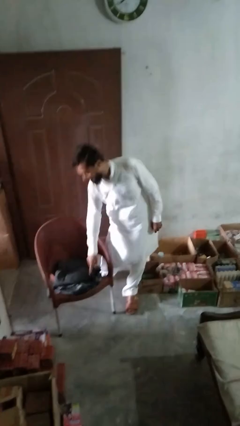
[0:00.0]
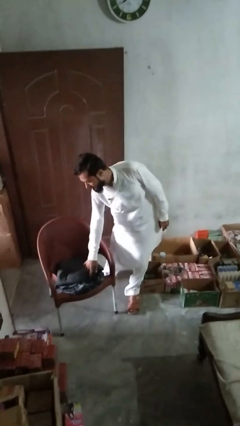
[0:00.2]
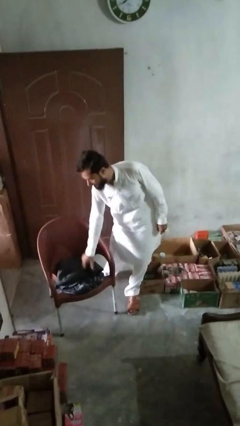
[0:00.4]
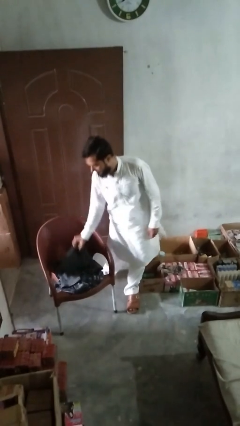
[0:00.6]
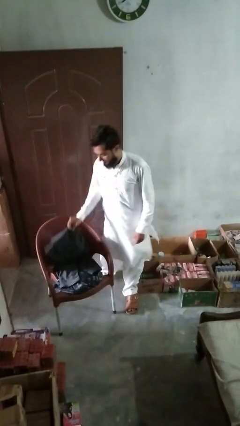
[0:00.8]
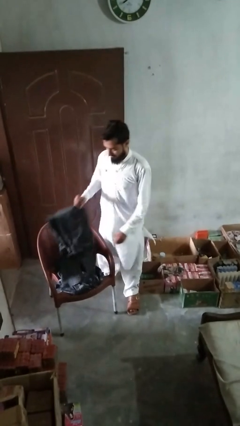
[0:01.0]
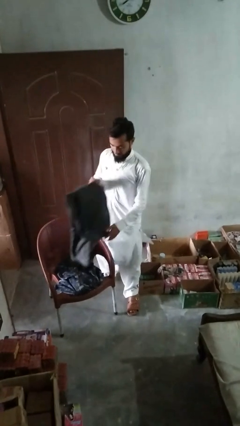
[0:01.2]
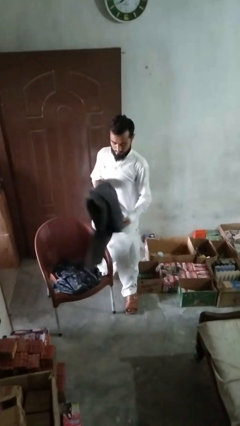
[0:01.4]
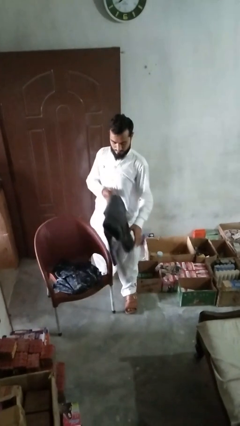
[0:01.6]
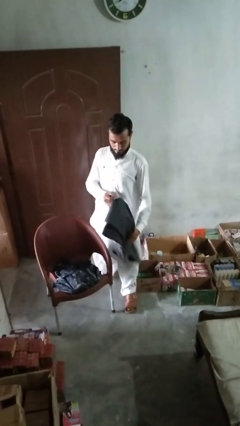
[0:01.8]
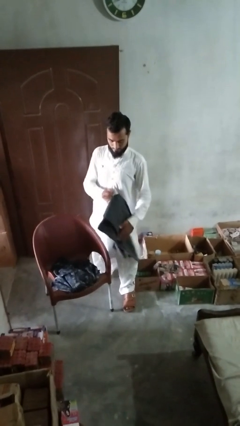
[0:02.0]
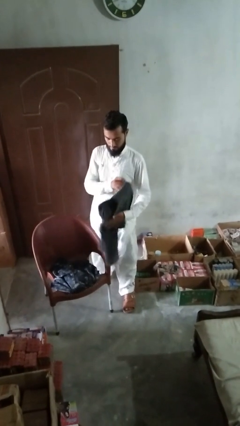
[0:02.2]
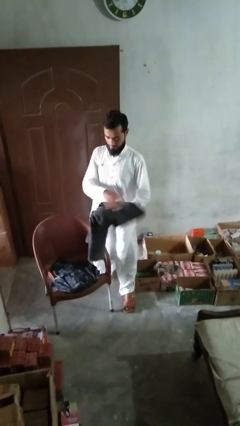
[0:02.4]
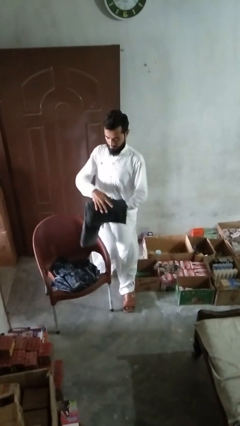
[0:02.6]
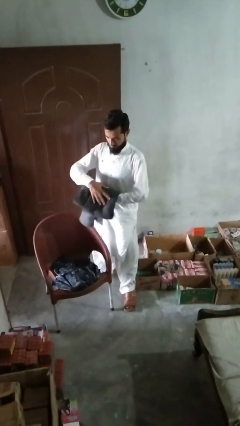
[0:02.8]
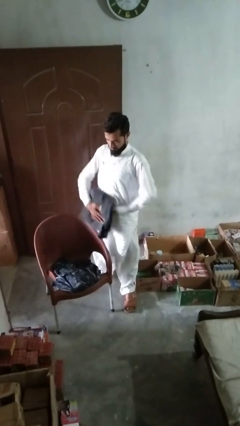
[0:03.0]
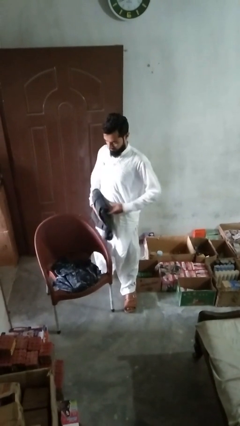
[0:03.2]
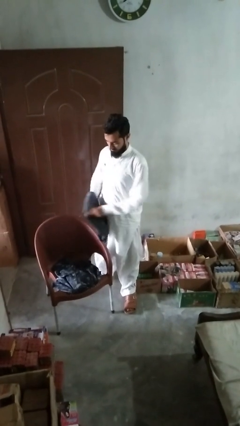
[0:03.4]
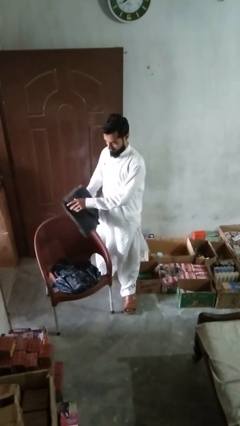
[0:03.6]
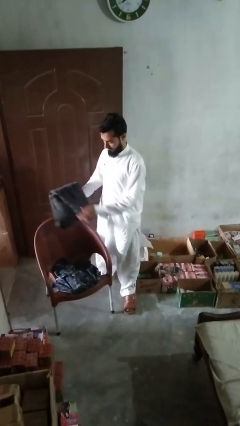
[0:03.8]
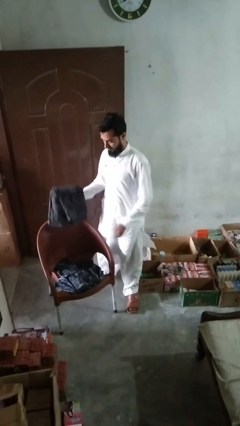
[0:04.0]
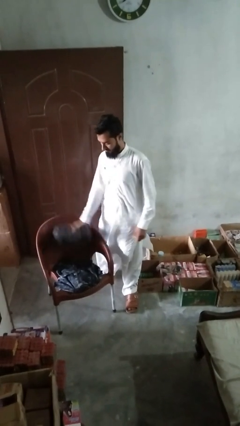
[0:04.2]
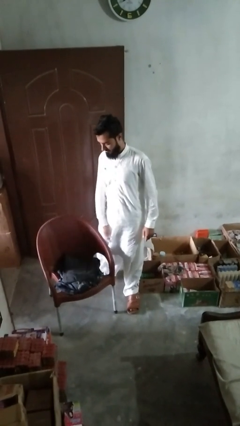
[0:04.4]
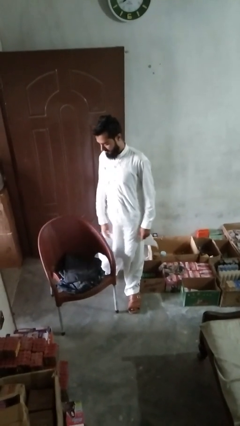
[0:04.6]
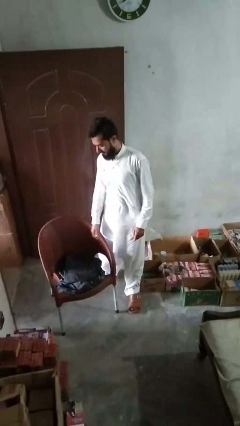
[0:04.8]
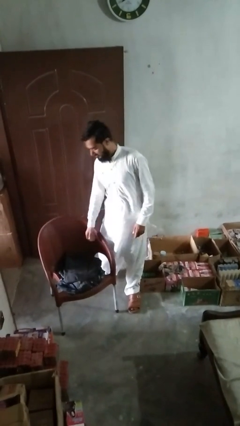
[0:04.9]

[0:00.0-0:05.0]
person folds pants

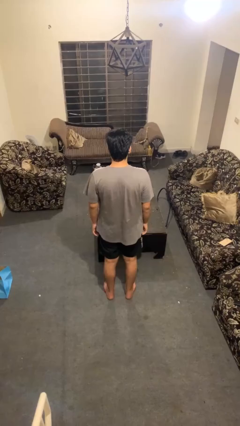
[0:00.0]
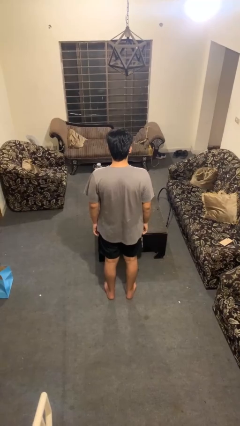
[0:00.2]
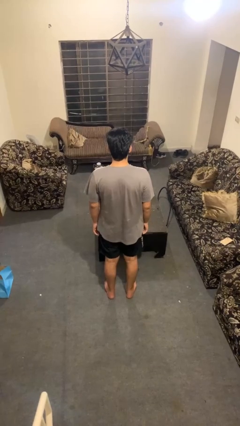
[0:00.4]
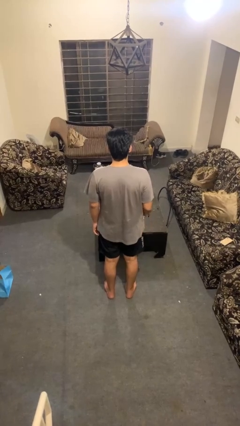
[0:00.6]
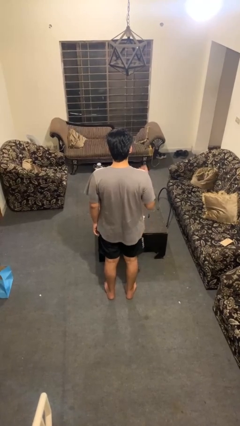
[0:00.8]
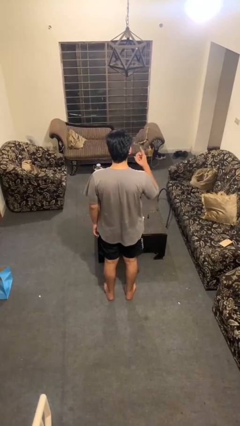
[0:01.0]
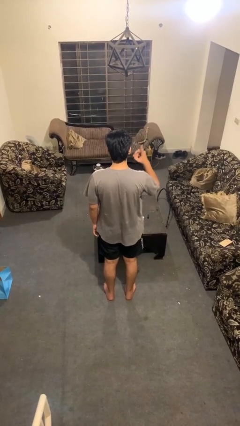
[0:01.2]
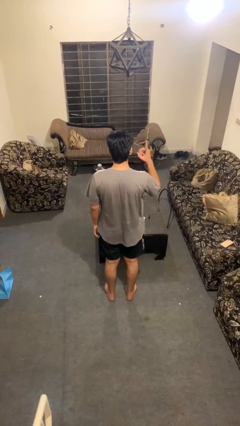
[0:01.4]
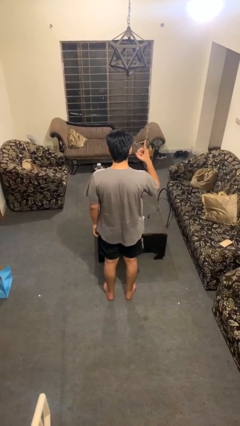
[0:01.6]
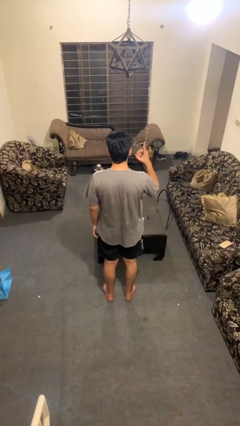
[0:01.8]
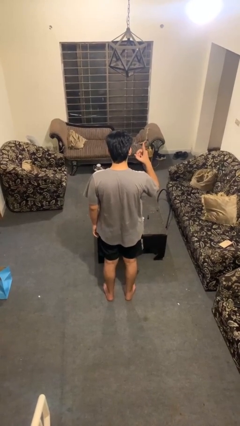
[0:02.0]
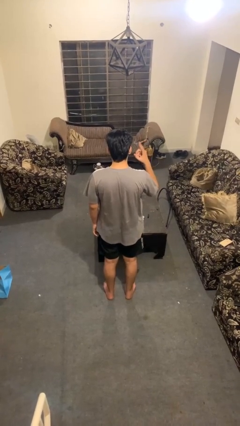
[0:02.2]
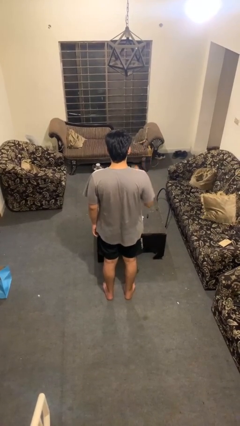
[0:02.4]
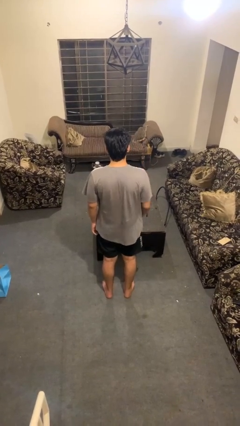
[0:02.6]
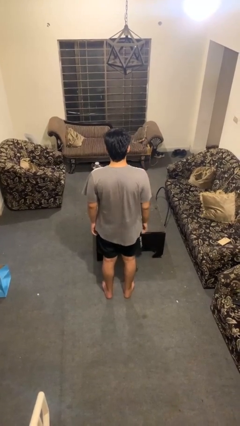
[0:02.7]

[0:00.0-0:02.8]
person gestures number one

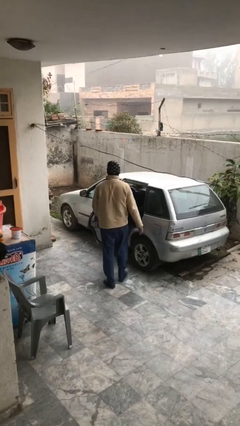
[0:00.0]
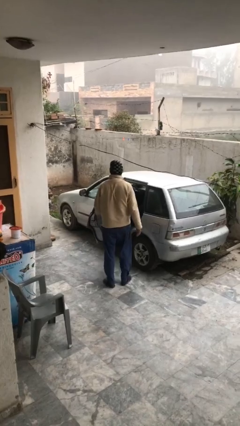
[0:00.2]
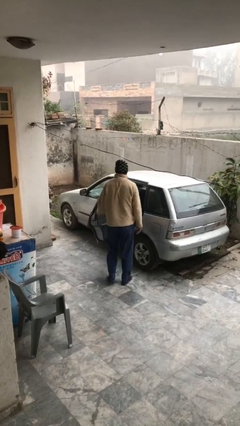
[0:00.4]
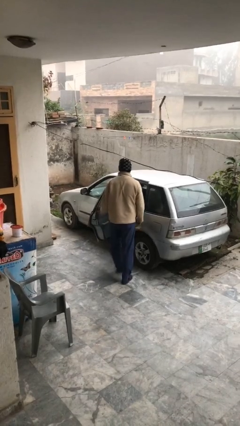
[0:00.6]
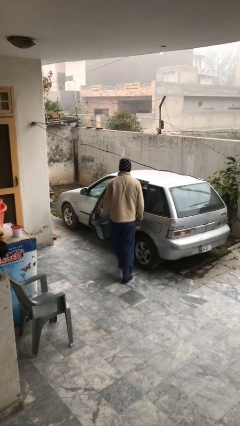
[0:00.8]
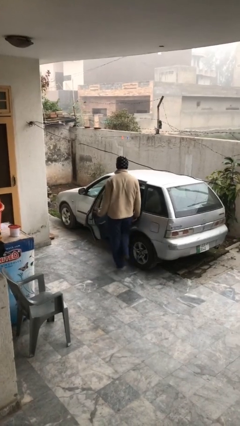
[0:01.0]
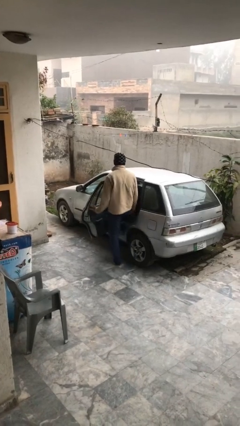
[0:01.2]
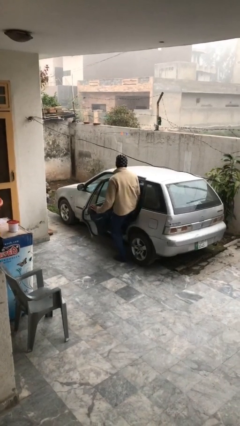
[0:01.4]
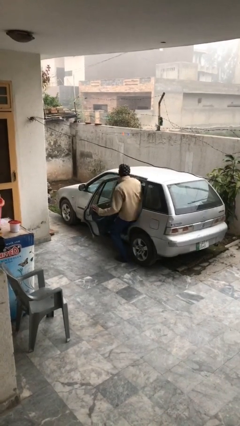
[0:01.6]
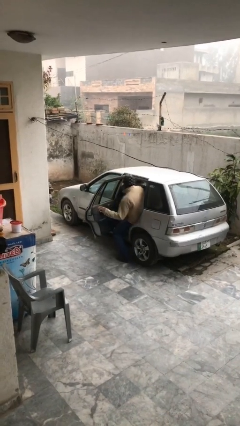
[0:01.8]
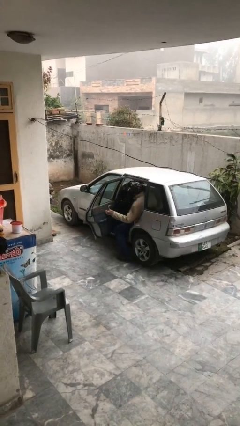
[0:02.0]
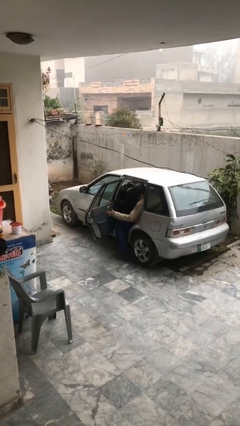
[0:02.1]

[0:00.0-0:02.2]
person enters car

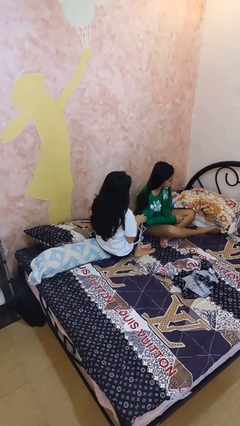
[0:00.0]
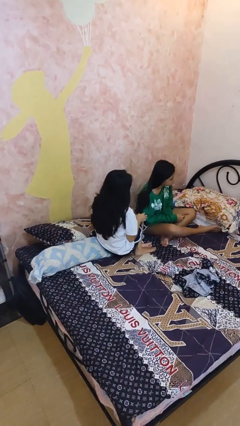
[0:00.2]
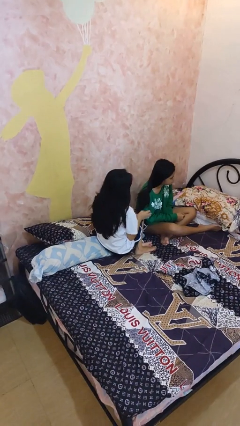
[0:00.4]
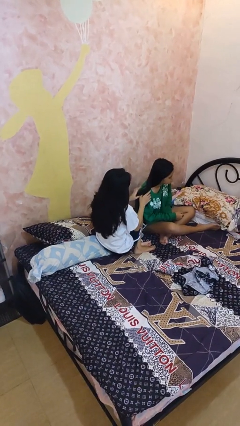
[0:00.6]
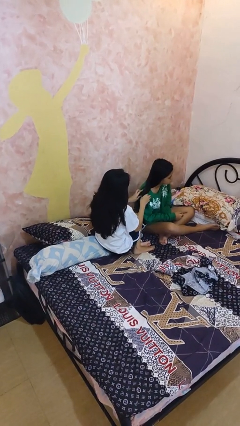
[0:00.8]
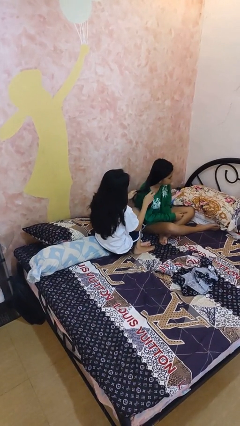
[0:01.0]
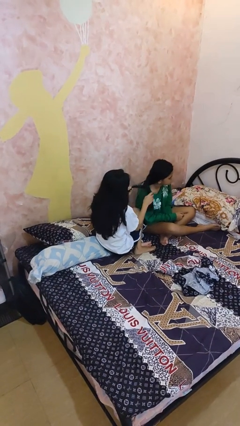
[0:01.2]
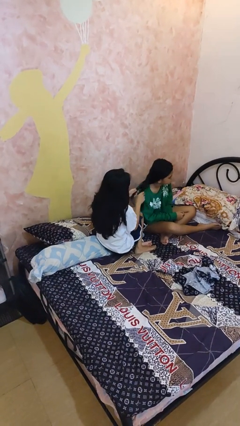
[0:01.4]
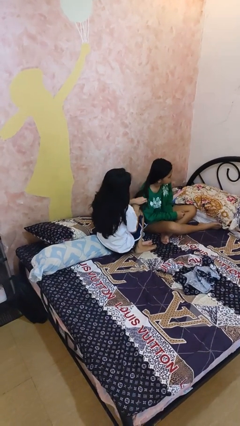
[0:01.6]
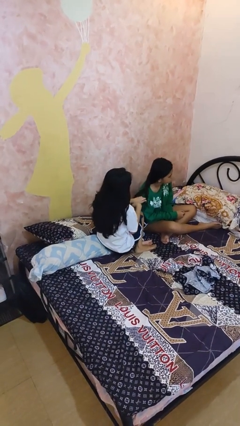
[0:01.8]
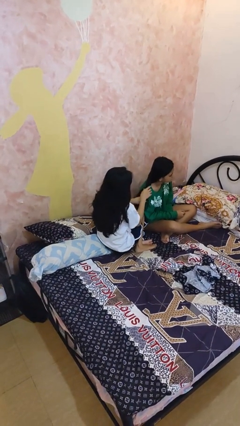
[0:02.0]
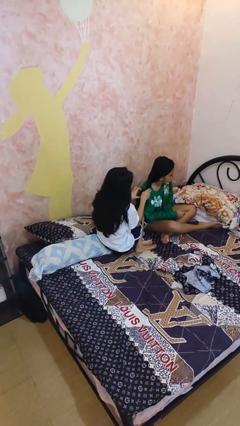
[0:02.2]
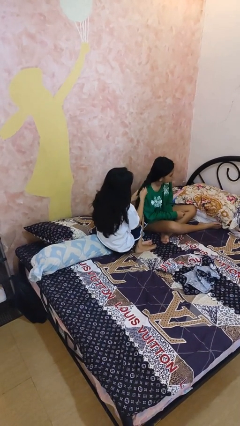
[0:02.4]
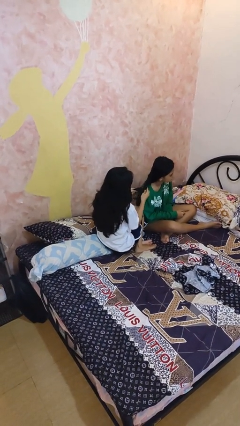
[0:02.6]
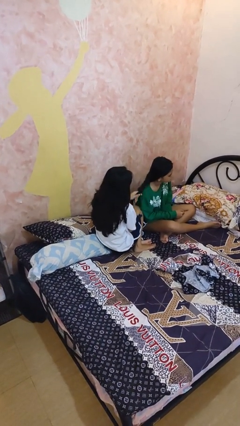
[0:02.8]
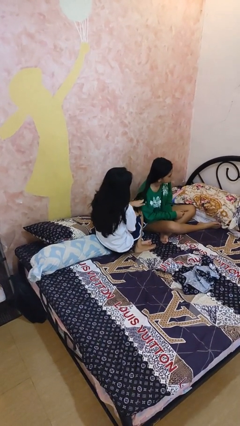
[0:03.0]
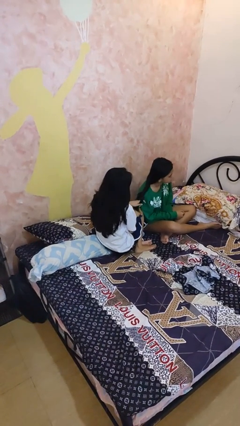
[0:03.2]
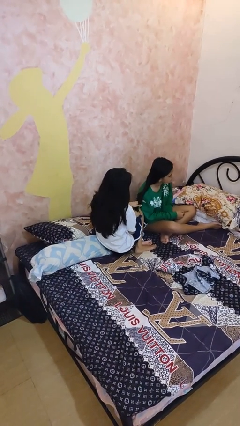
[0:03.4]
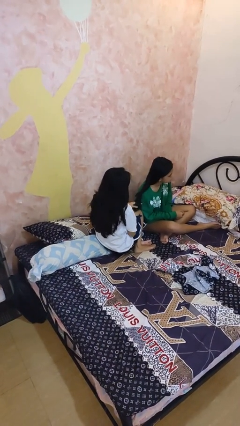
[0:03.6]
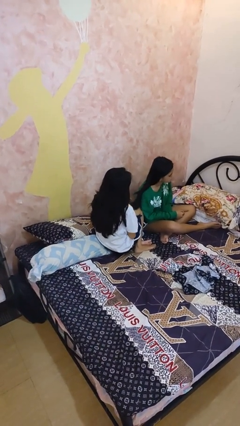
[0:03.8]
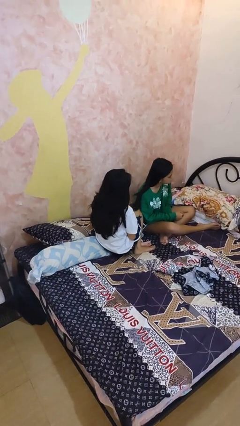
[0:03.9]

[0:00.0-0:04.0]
person braids hair of person

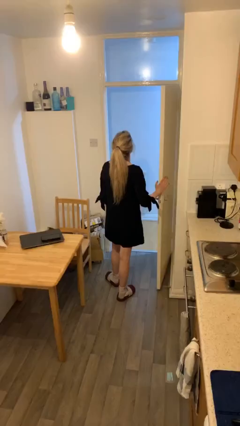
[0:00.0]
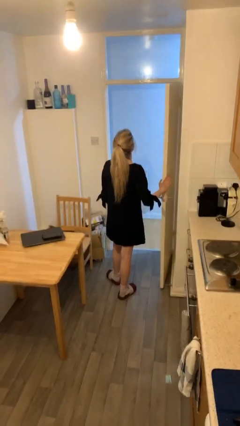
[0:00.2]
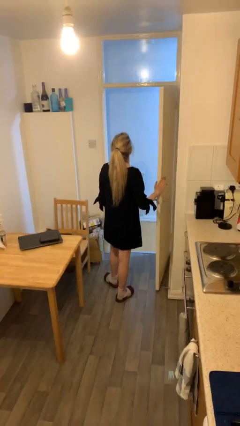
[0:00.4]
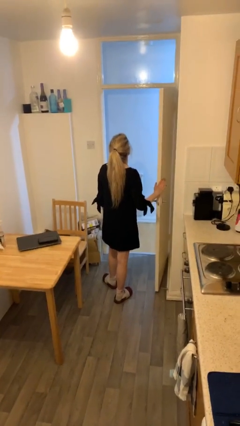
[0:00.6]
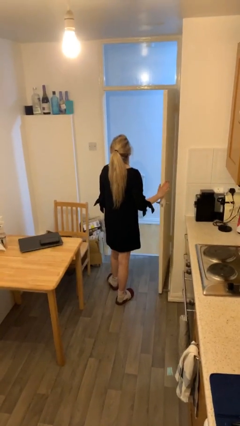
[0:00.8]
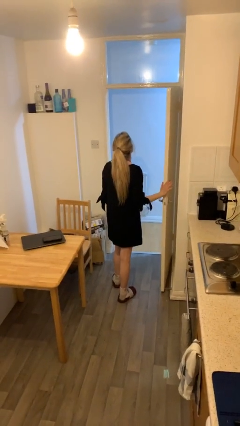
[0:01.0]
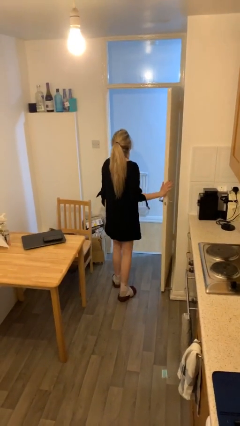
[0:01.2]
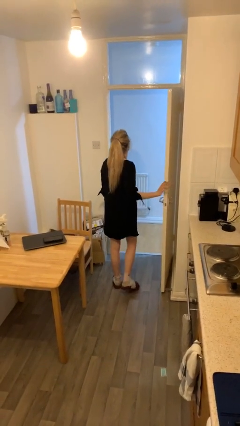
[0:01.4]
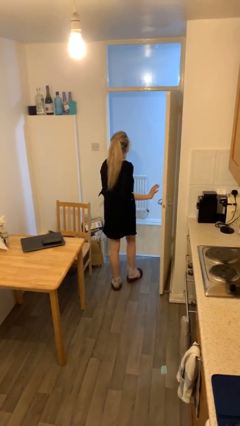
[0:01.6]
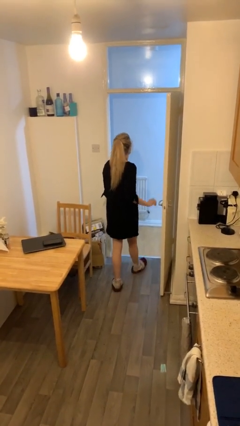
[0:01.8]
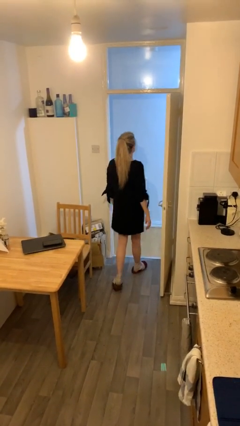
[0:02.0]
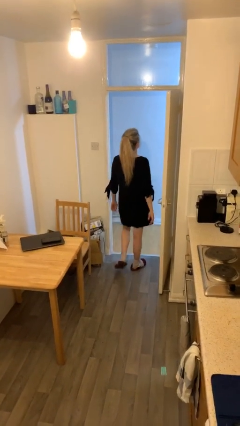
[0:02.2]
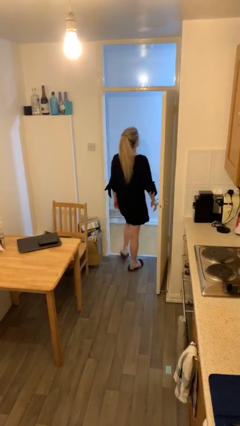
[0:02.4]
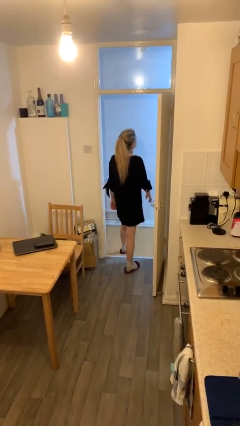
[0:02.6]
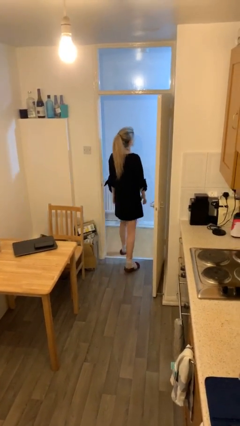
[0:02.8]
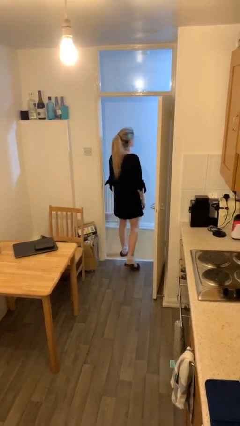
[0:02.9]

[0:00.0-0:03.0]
person exits scene through structure

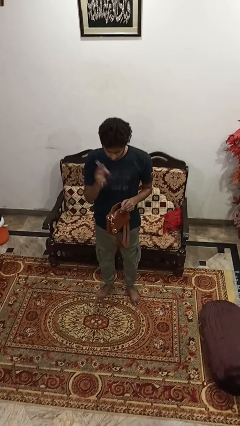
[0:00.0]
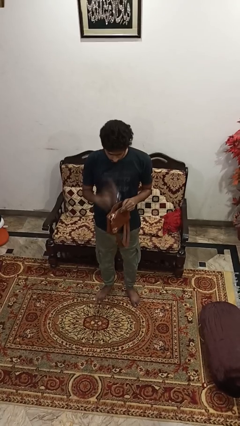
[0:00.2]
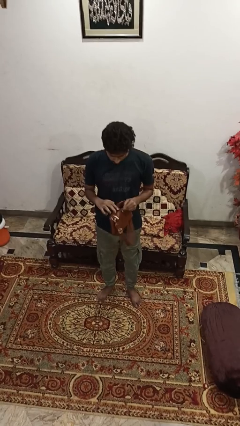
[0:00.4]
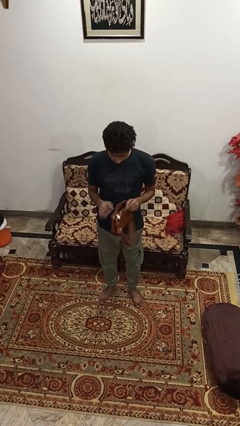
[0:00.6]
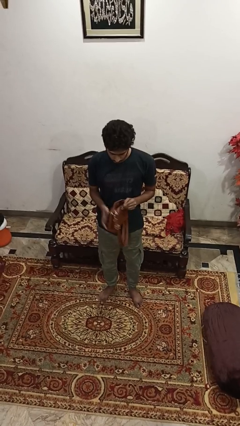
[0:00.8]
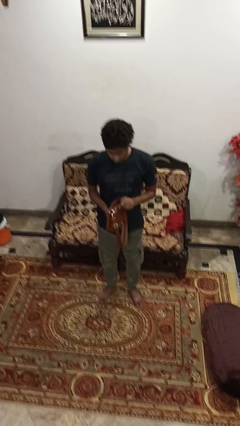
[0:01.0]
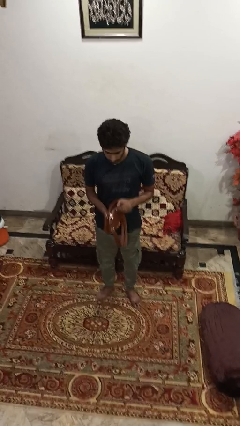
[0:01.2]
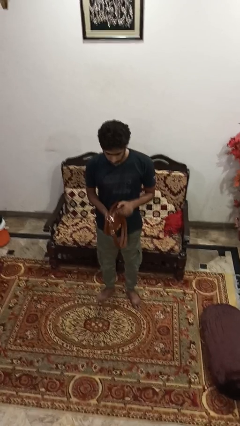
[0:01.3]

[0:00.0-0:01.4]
person puts object into purse
